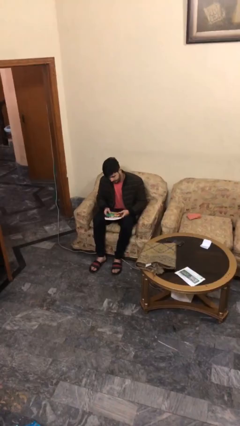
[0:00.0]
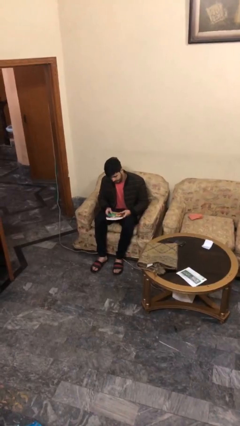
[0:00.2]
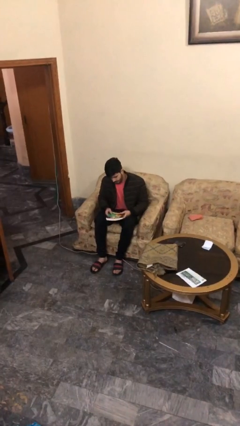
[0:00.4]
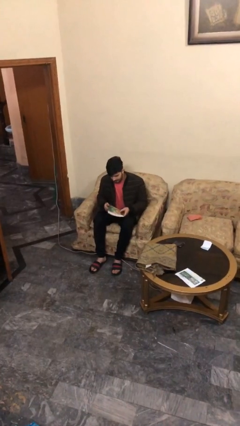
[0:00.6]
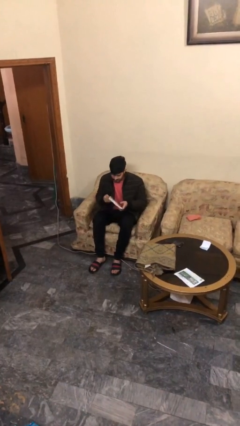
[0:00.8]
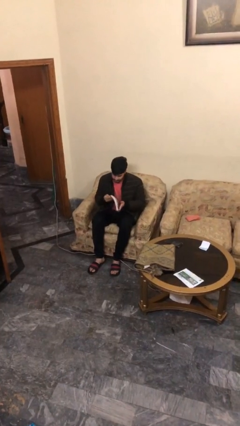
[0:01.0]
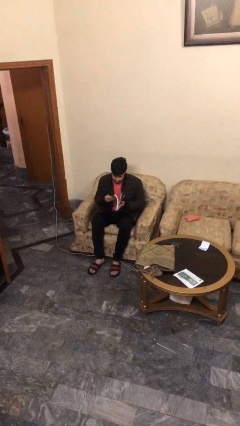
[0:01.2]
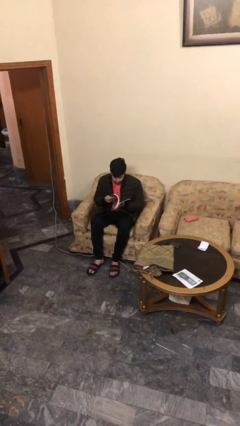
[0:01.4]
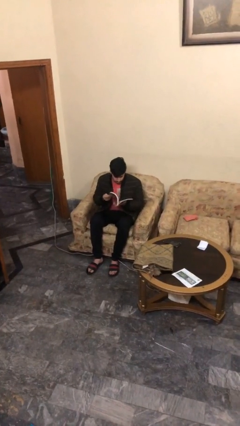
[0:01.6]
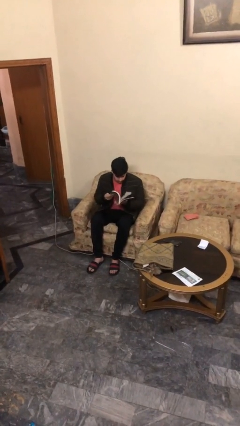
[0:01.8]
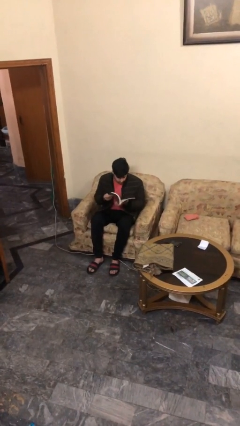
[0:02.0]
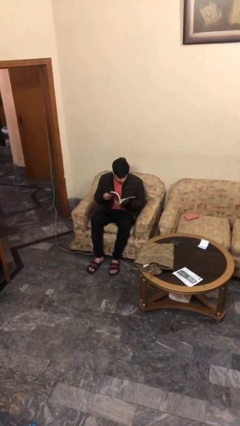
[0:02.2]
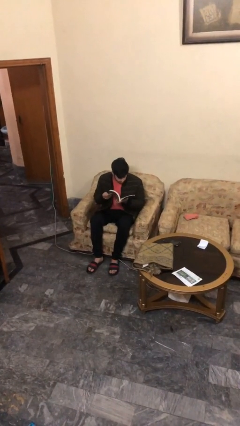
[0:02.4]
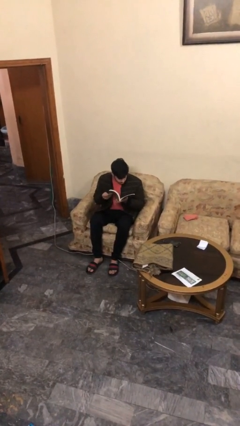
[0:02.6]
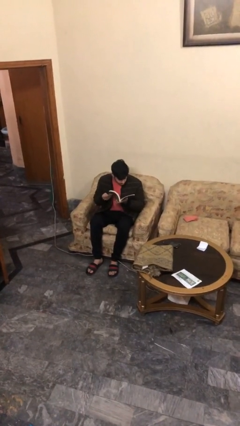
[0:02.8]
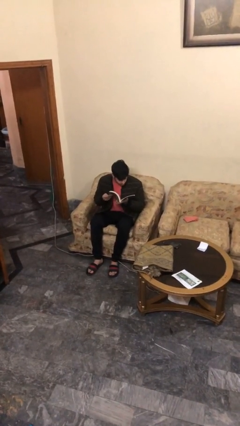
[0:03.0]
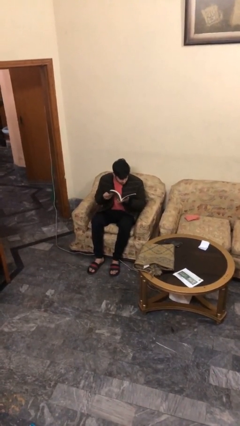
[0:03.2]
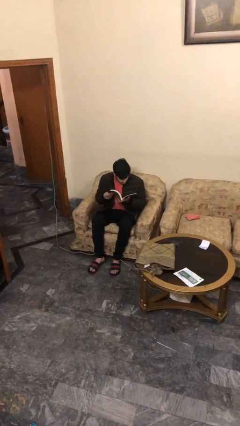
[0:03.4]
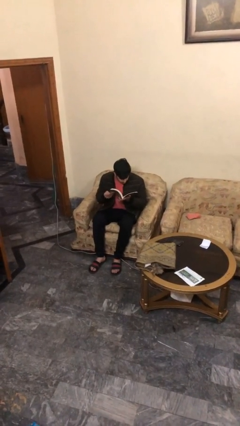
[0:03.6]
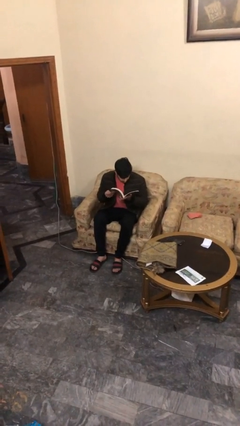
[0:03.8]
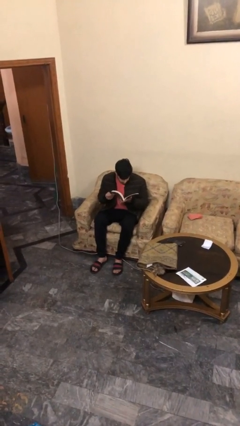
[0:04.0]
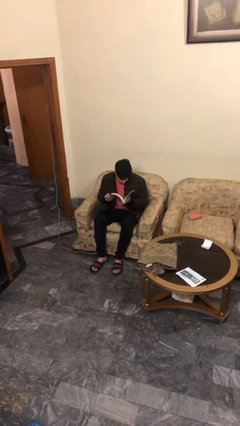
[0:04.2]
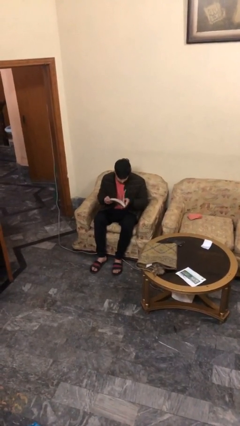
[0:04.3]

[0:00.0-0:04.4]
person reads document

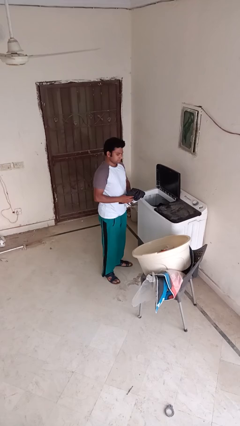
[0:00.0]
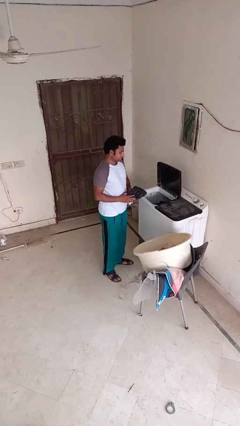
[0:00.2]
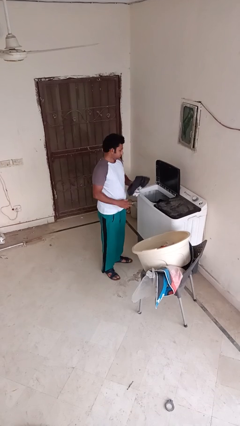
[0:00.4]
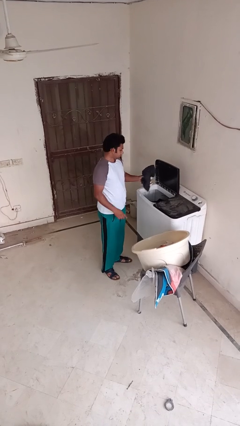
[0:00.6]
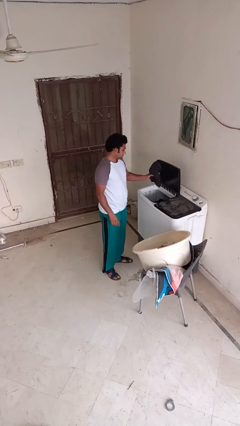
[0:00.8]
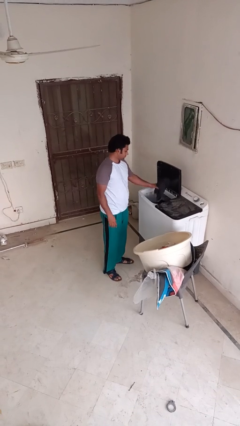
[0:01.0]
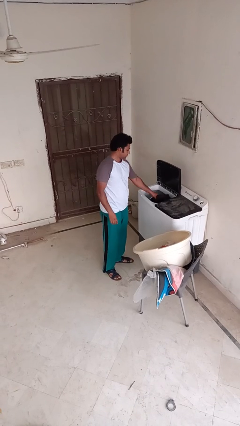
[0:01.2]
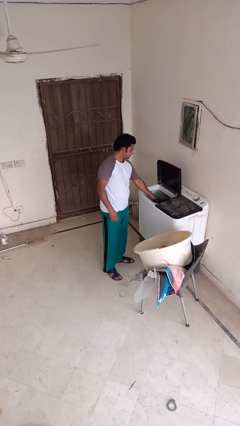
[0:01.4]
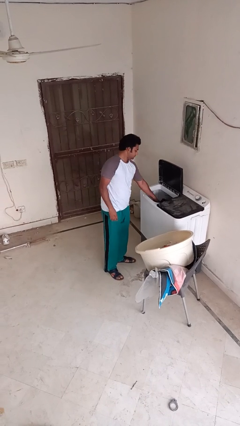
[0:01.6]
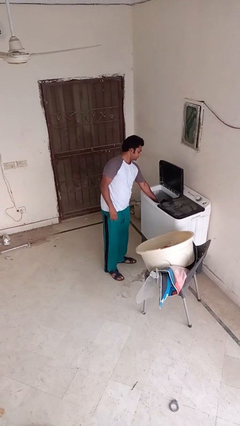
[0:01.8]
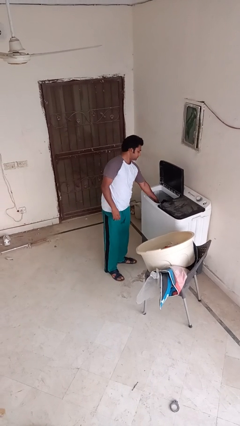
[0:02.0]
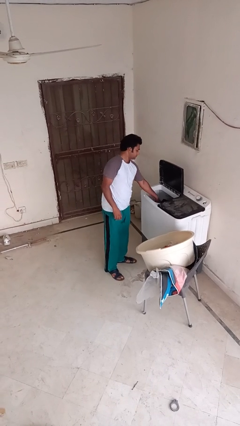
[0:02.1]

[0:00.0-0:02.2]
person loads clotheswasher

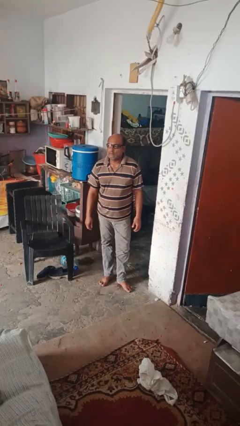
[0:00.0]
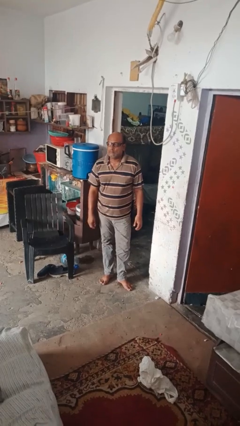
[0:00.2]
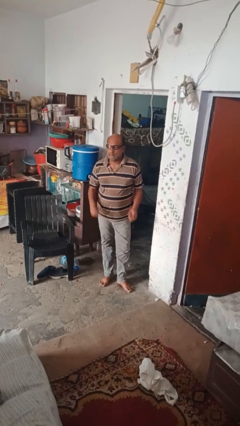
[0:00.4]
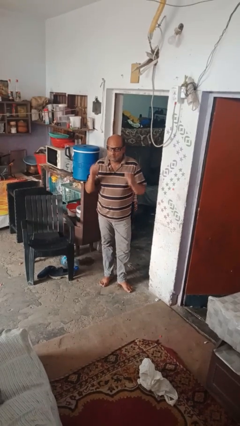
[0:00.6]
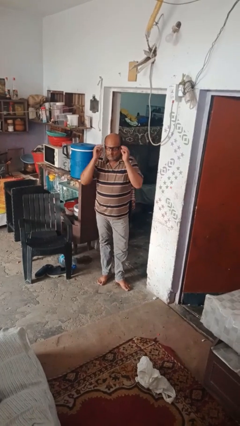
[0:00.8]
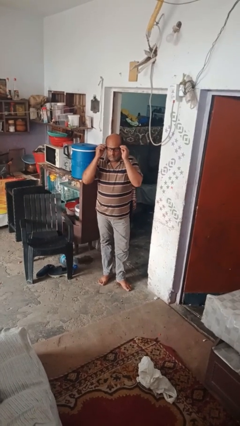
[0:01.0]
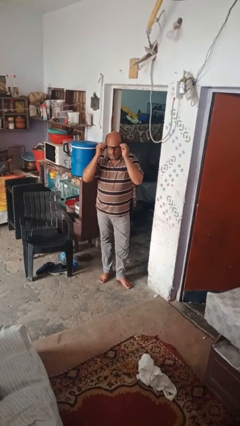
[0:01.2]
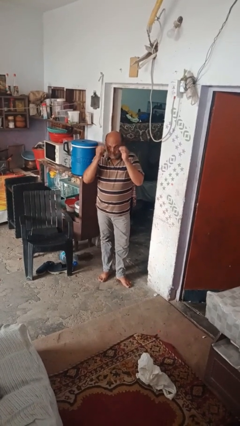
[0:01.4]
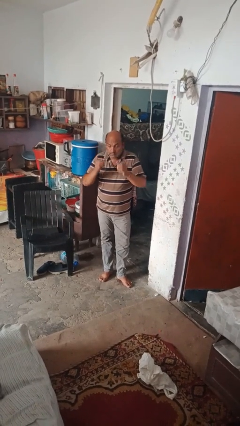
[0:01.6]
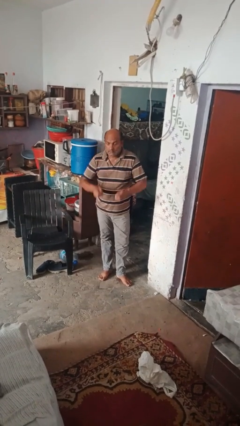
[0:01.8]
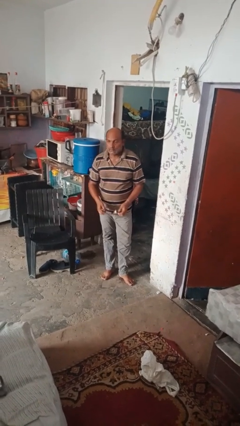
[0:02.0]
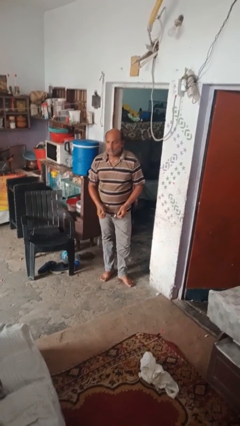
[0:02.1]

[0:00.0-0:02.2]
person takes off glasses

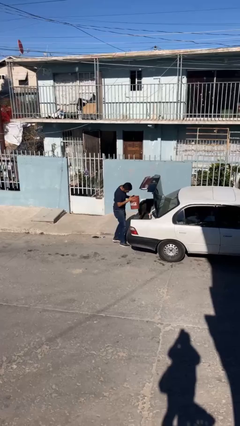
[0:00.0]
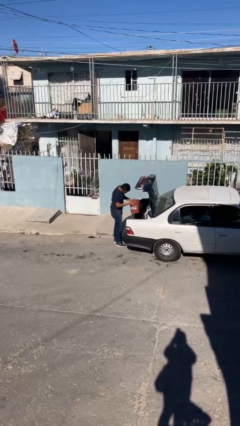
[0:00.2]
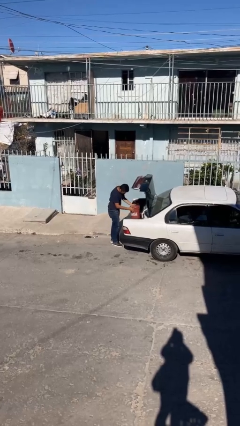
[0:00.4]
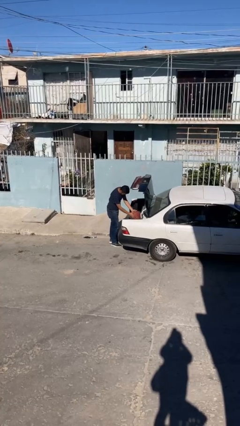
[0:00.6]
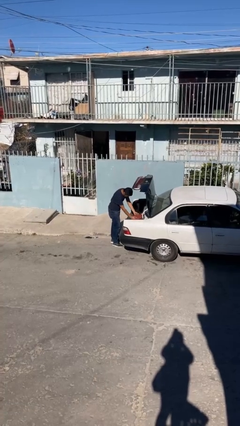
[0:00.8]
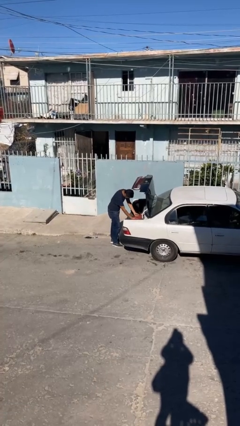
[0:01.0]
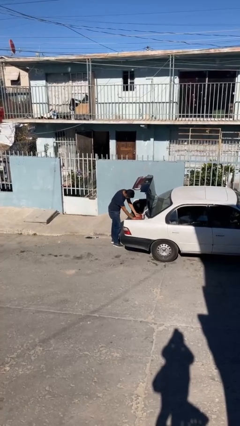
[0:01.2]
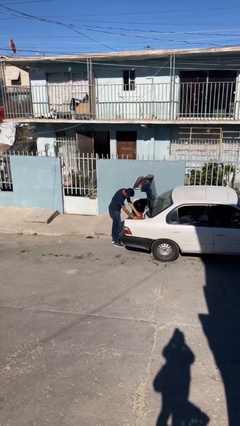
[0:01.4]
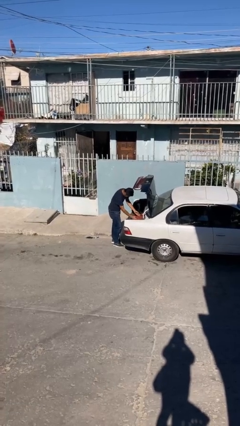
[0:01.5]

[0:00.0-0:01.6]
person loads car

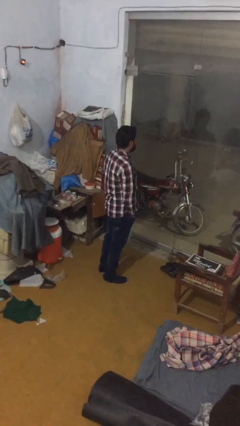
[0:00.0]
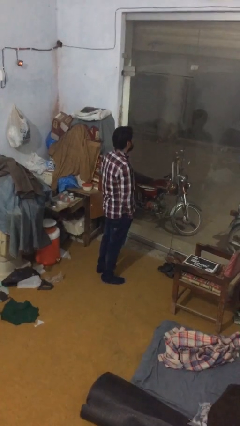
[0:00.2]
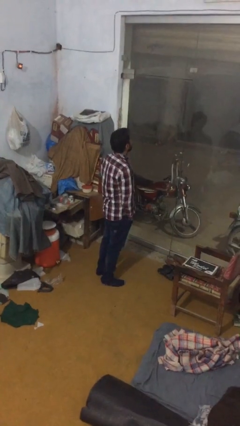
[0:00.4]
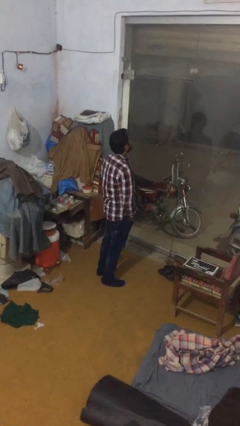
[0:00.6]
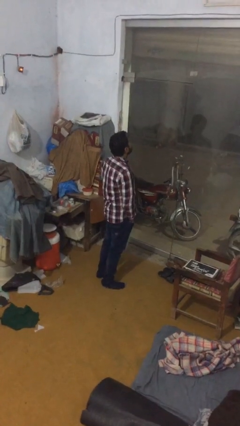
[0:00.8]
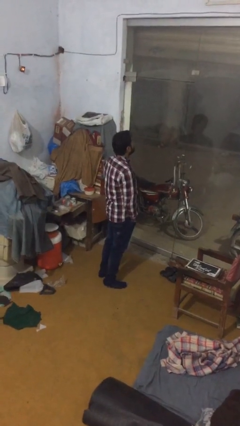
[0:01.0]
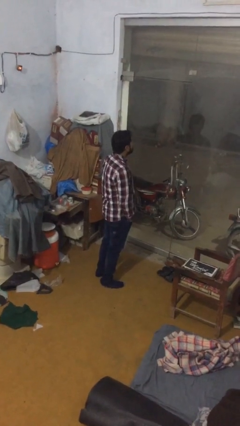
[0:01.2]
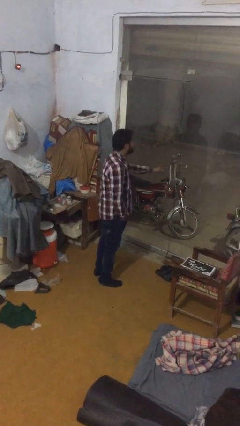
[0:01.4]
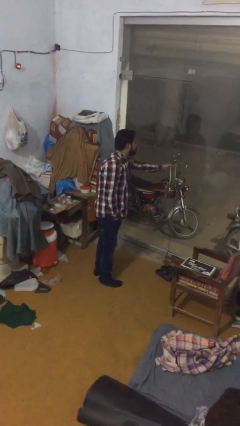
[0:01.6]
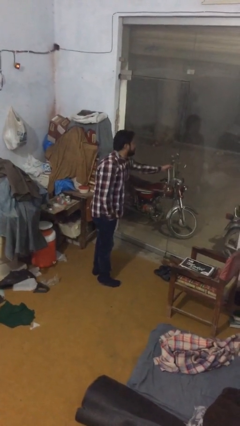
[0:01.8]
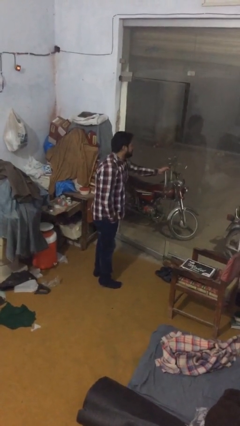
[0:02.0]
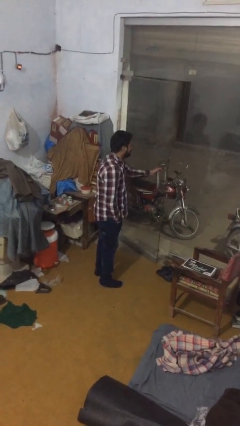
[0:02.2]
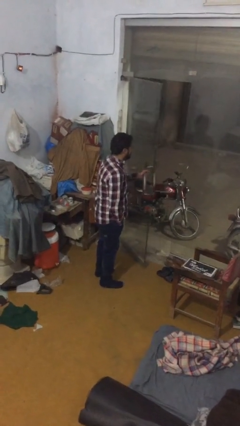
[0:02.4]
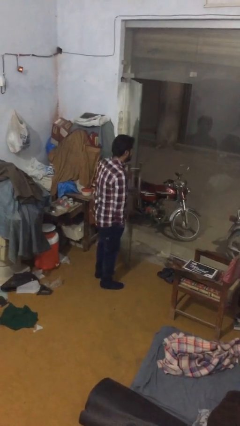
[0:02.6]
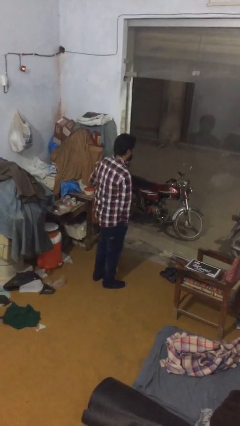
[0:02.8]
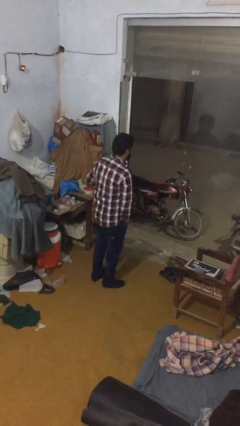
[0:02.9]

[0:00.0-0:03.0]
person opens facility door

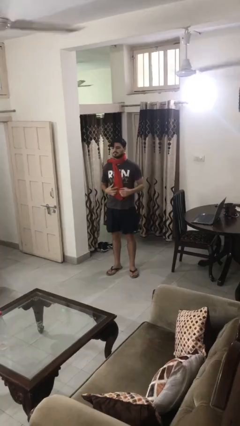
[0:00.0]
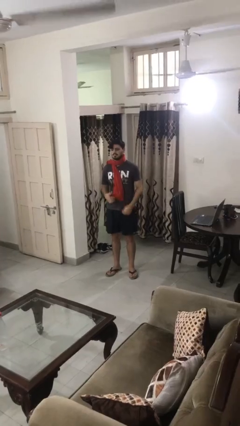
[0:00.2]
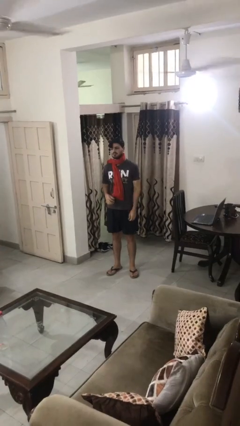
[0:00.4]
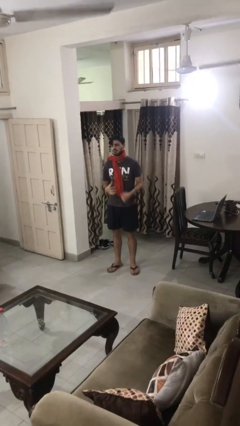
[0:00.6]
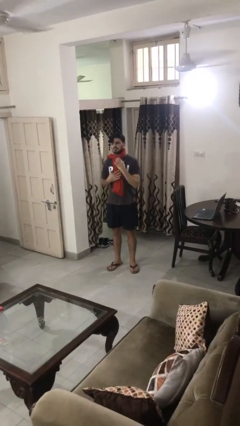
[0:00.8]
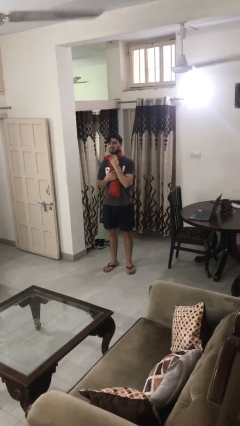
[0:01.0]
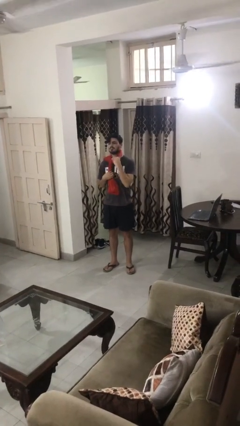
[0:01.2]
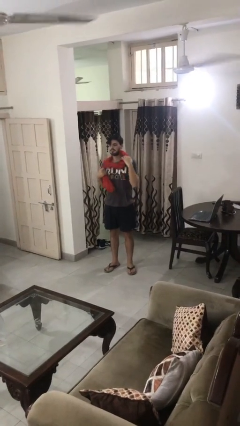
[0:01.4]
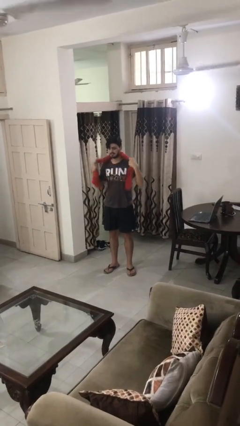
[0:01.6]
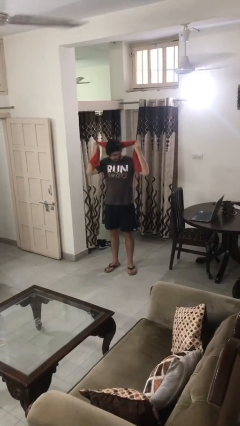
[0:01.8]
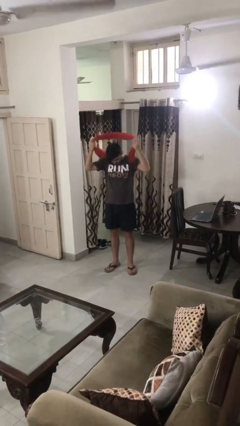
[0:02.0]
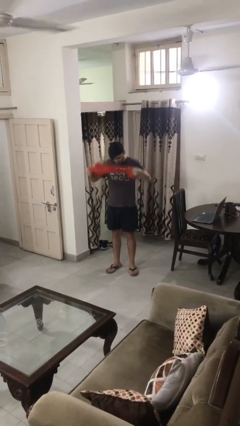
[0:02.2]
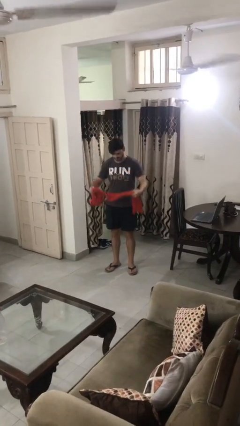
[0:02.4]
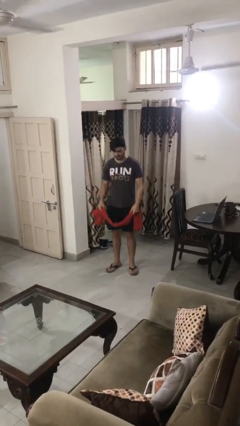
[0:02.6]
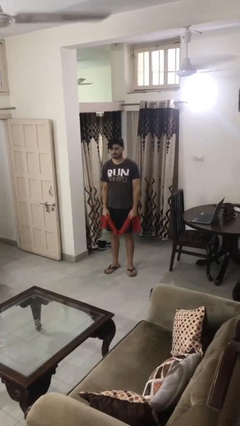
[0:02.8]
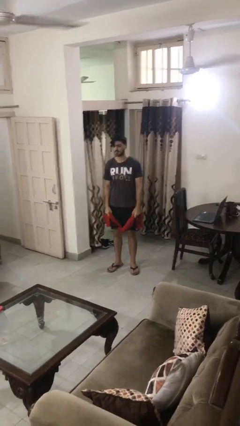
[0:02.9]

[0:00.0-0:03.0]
person takes off scarf

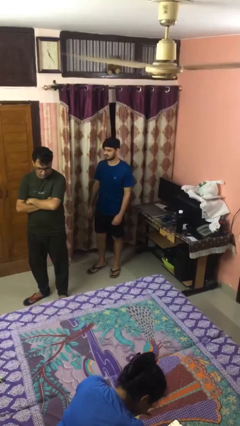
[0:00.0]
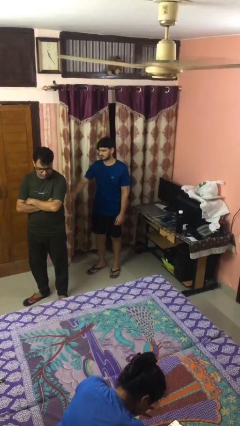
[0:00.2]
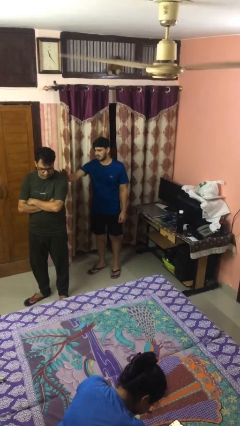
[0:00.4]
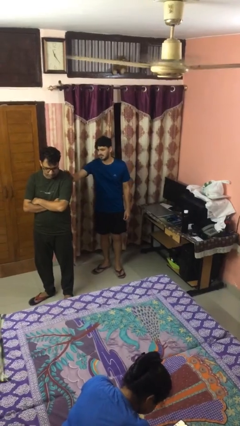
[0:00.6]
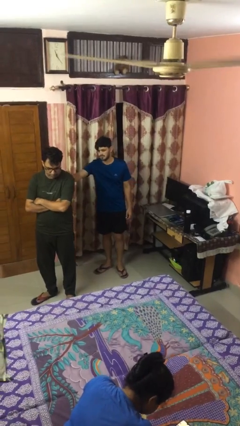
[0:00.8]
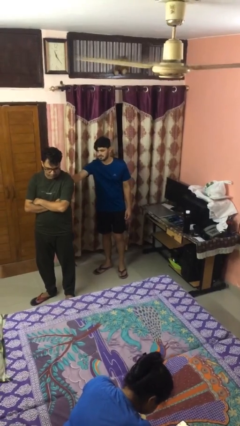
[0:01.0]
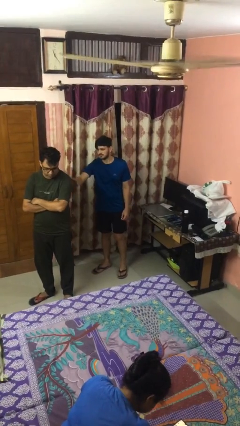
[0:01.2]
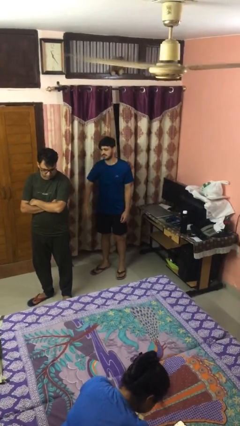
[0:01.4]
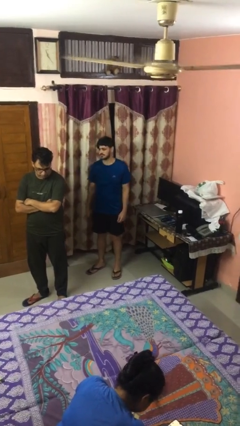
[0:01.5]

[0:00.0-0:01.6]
person touches back of person
